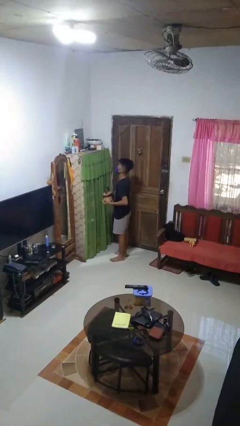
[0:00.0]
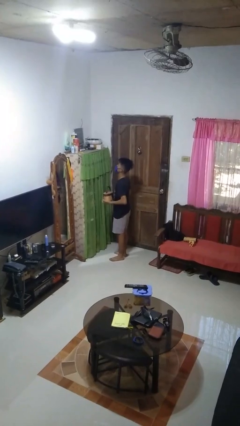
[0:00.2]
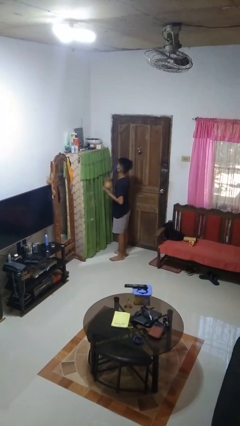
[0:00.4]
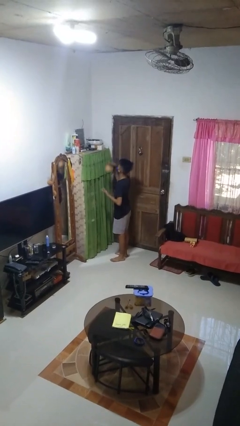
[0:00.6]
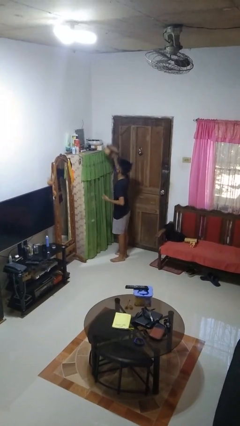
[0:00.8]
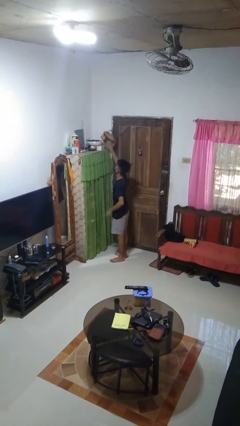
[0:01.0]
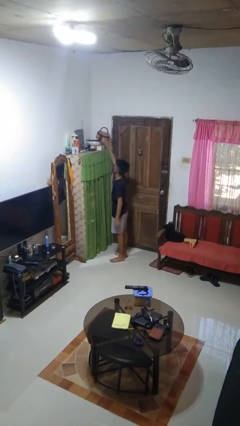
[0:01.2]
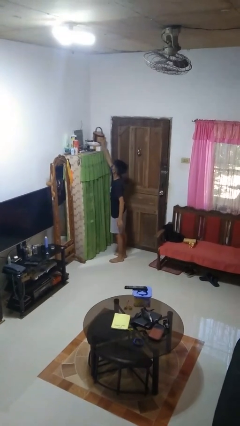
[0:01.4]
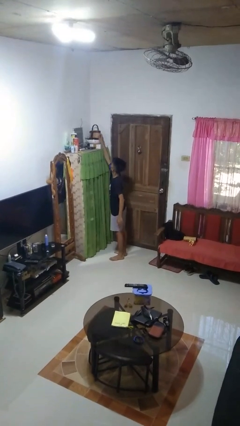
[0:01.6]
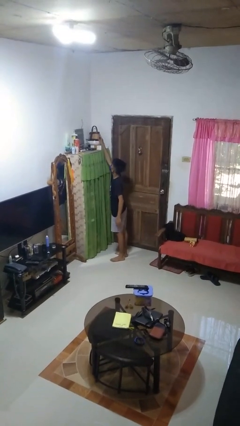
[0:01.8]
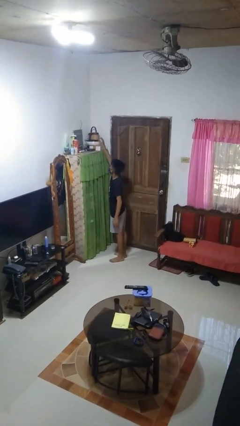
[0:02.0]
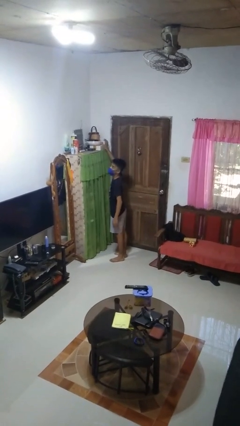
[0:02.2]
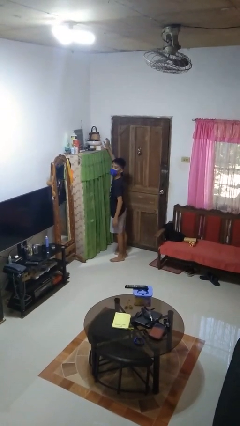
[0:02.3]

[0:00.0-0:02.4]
person puts down object on shelf

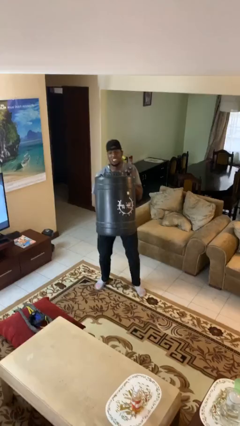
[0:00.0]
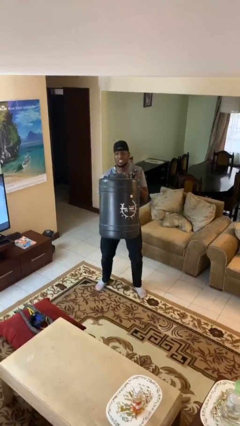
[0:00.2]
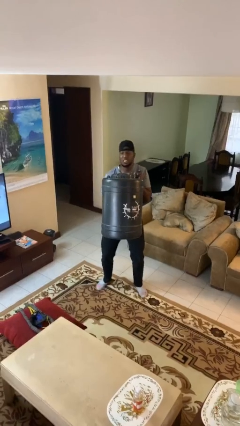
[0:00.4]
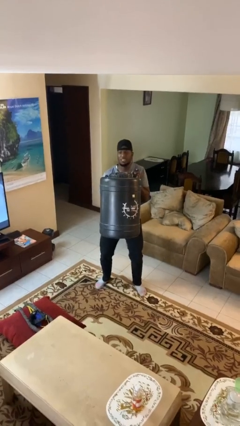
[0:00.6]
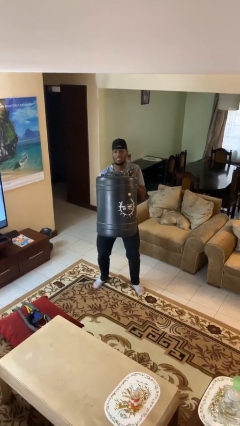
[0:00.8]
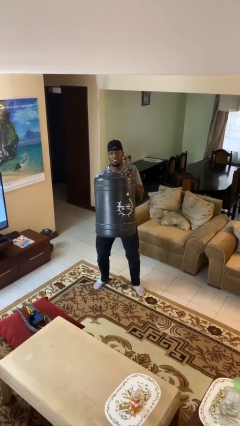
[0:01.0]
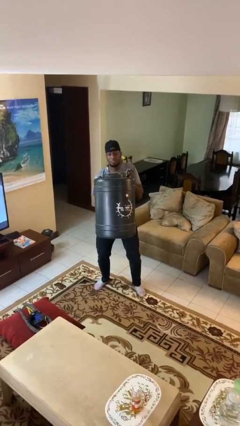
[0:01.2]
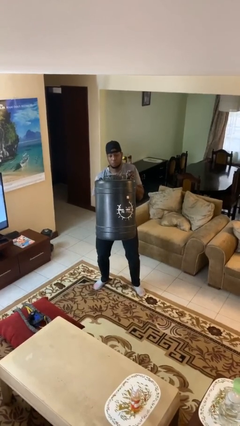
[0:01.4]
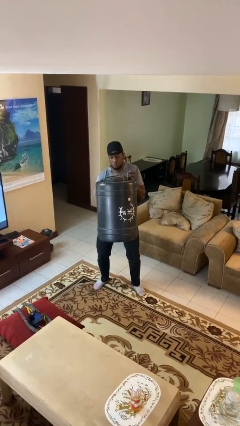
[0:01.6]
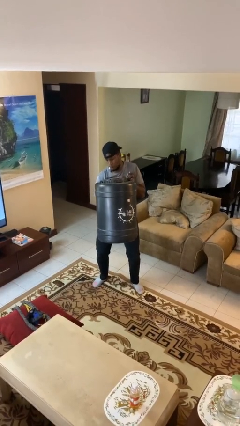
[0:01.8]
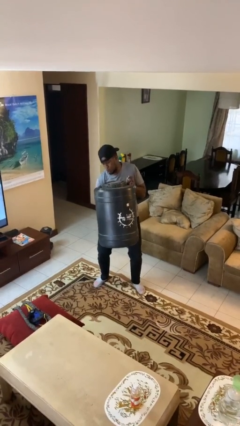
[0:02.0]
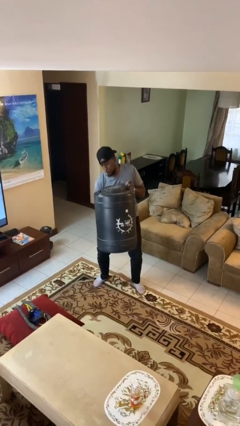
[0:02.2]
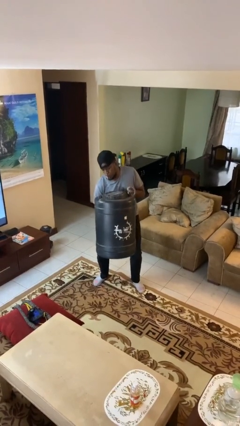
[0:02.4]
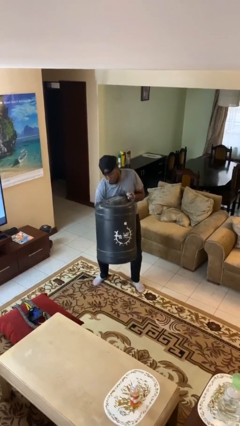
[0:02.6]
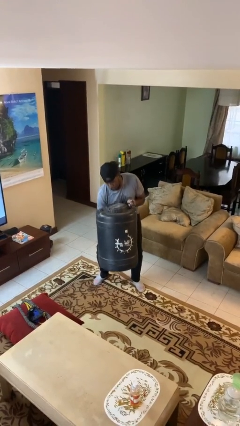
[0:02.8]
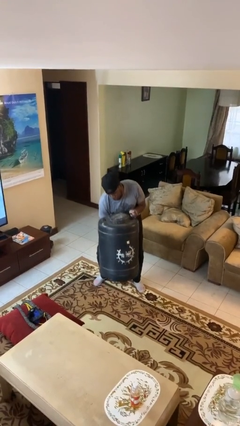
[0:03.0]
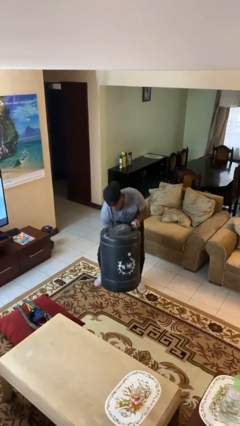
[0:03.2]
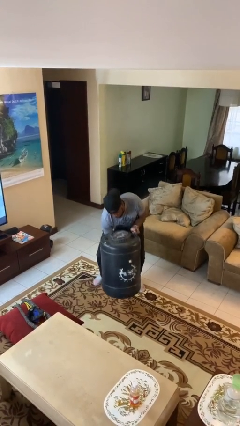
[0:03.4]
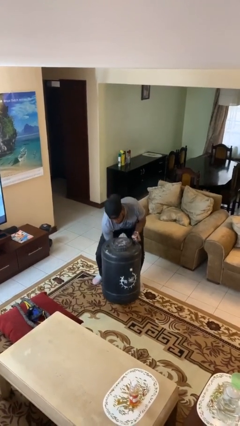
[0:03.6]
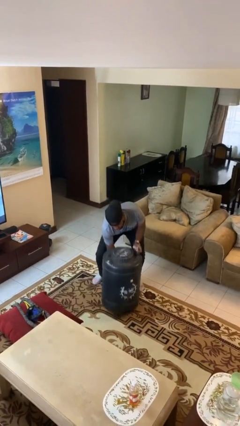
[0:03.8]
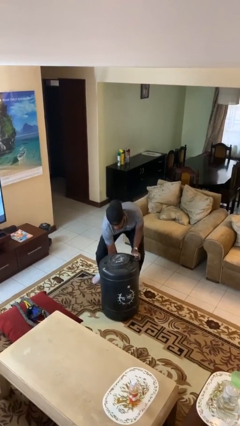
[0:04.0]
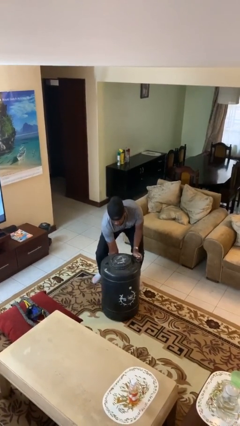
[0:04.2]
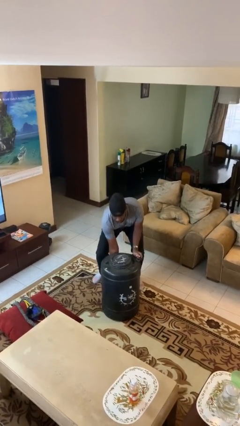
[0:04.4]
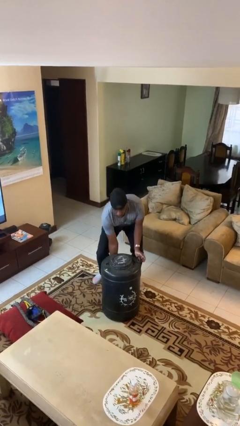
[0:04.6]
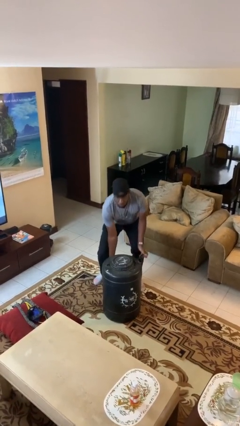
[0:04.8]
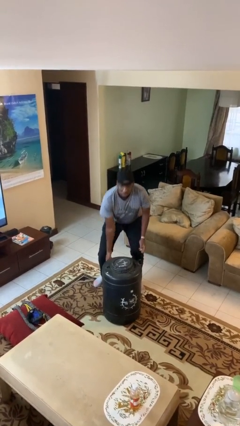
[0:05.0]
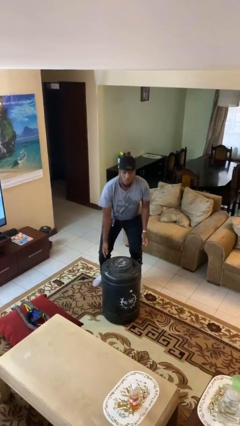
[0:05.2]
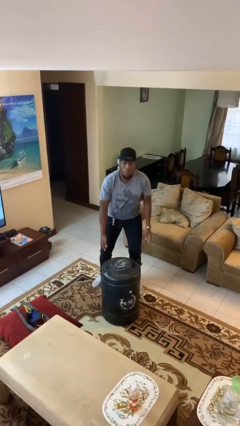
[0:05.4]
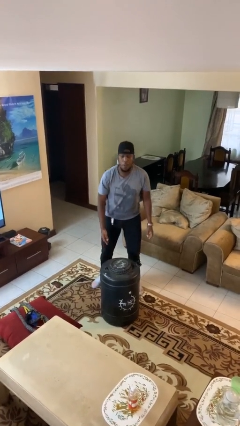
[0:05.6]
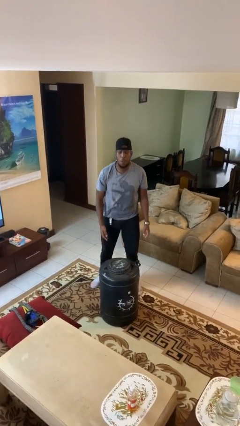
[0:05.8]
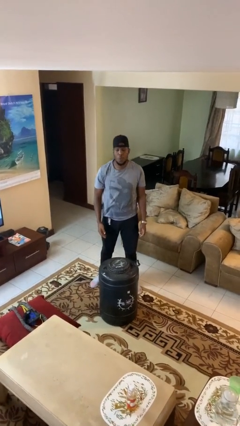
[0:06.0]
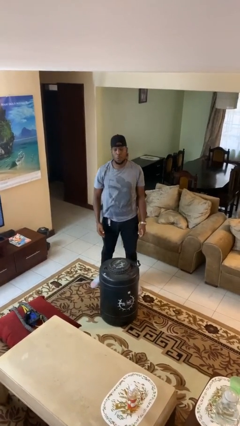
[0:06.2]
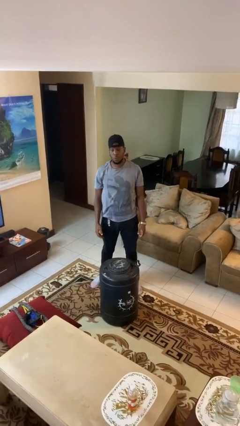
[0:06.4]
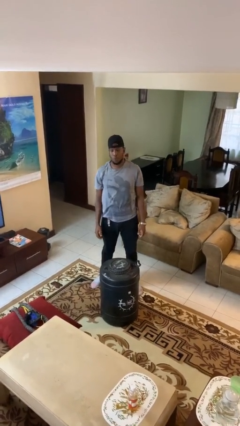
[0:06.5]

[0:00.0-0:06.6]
person puts down object on floor

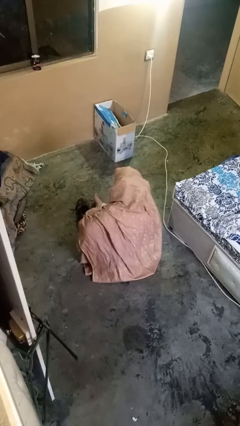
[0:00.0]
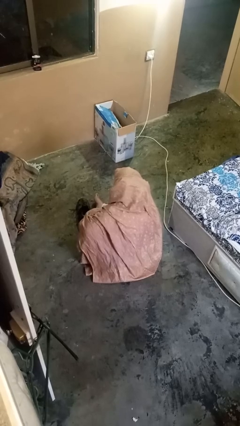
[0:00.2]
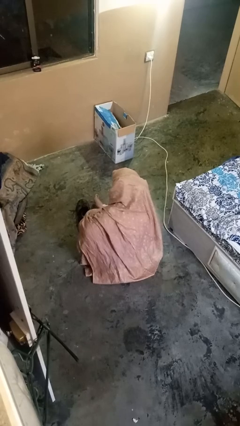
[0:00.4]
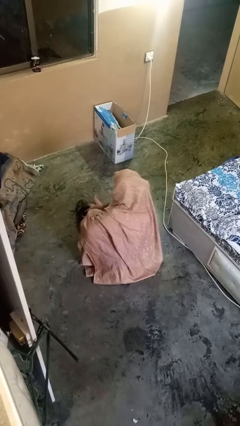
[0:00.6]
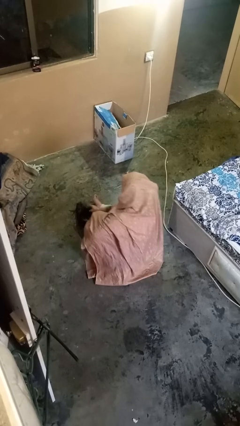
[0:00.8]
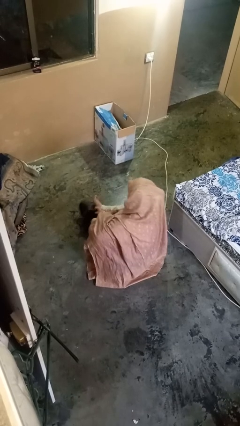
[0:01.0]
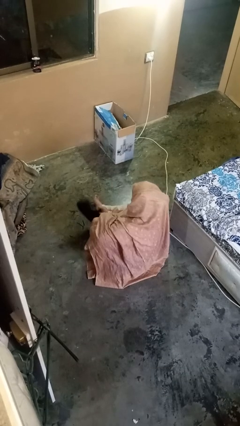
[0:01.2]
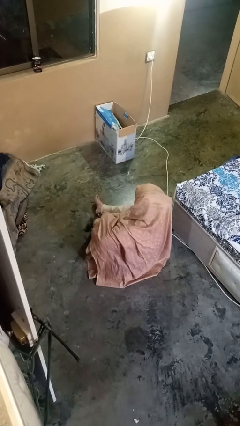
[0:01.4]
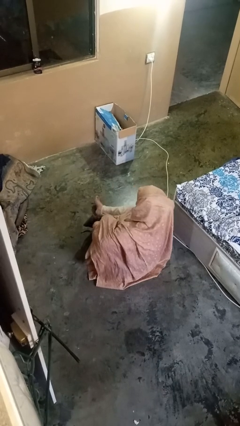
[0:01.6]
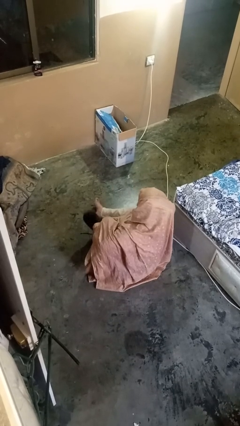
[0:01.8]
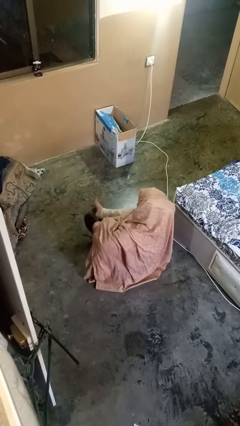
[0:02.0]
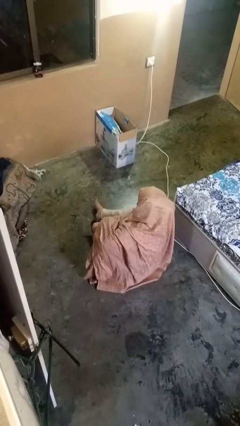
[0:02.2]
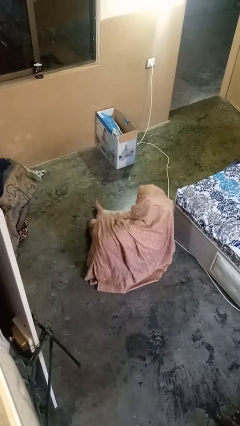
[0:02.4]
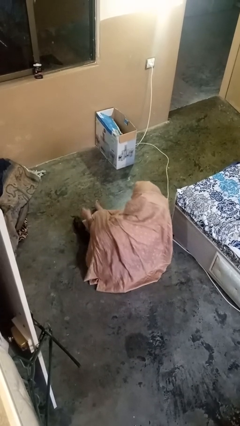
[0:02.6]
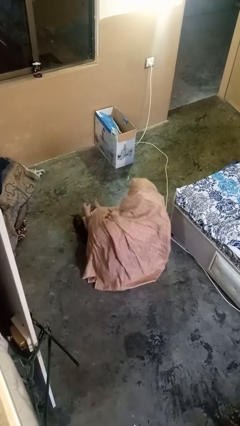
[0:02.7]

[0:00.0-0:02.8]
person puts on shoes

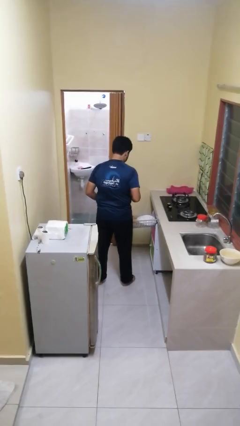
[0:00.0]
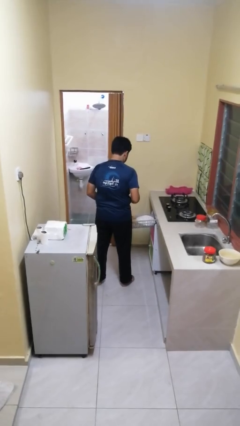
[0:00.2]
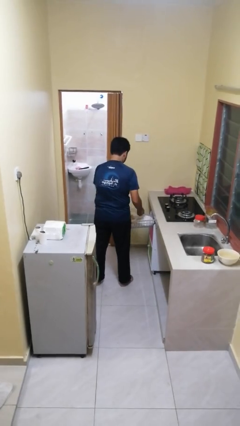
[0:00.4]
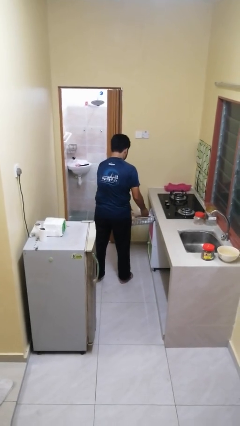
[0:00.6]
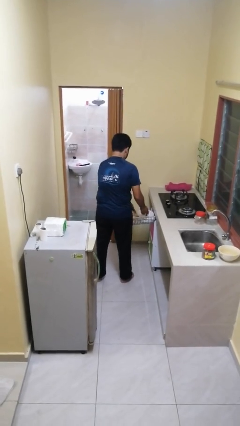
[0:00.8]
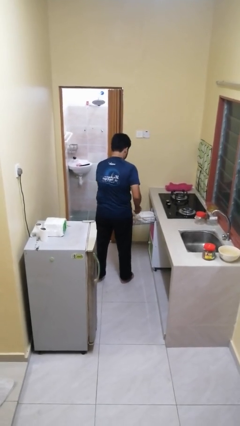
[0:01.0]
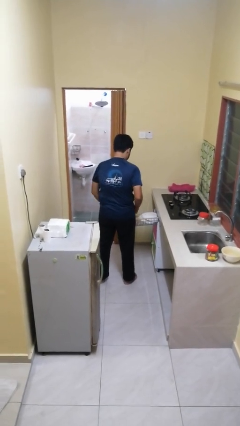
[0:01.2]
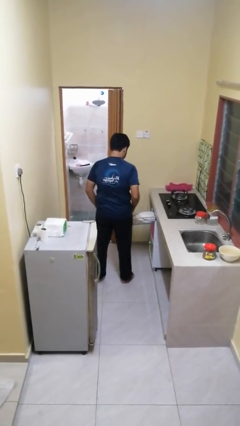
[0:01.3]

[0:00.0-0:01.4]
person puts object into kitchen drawer

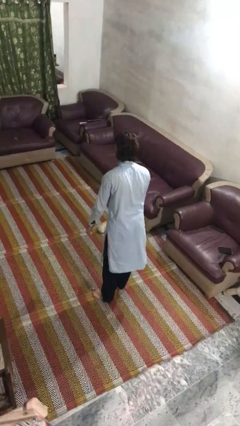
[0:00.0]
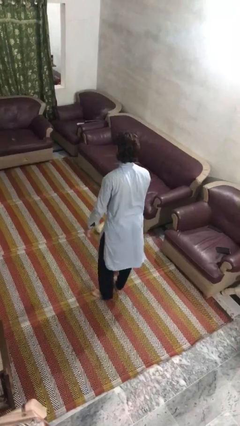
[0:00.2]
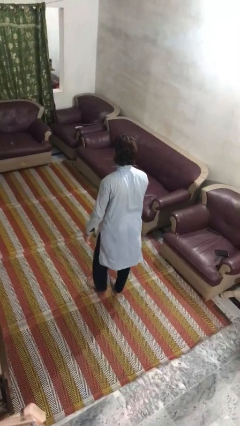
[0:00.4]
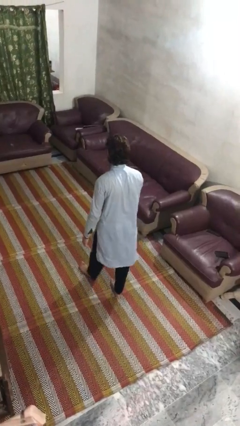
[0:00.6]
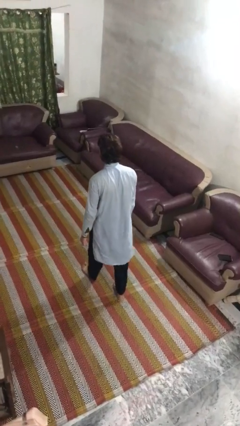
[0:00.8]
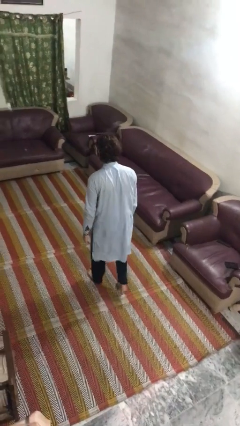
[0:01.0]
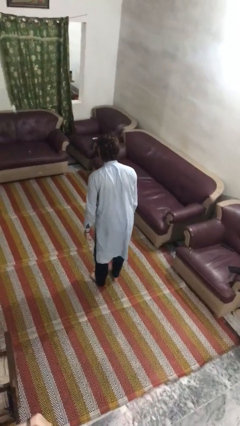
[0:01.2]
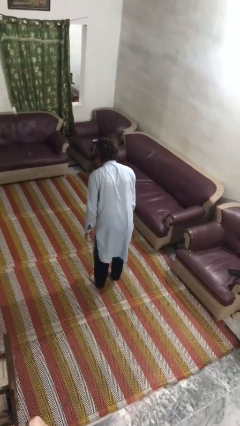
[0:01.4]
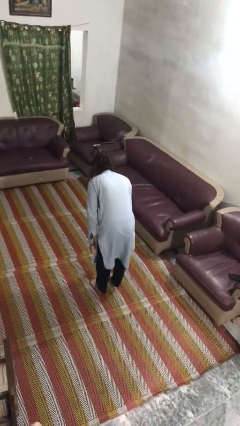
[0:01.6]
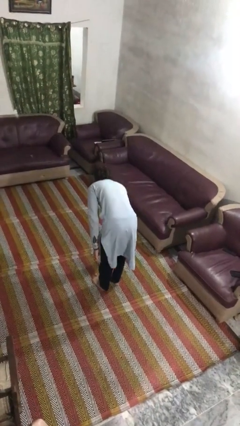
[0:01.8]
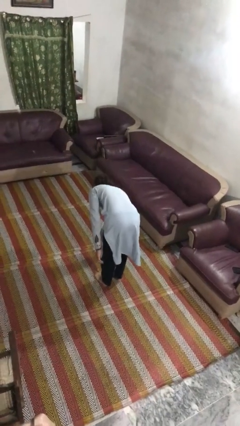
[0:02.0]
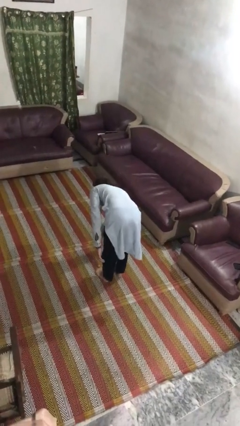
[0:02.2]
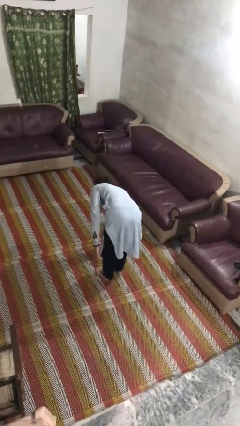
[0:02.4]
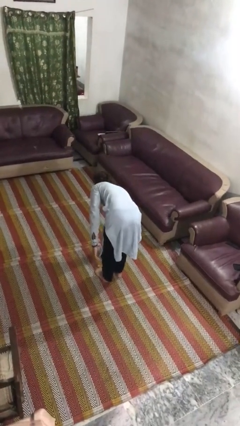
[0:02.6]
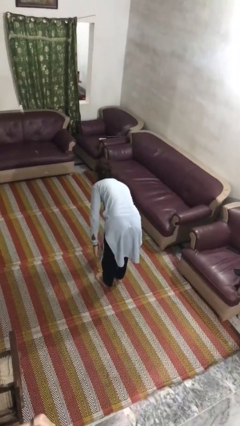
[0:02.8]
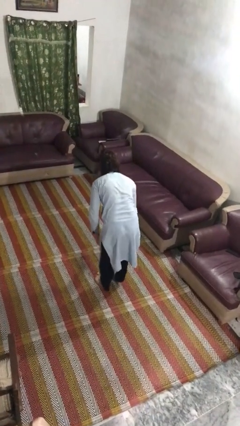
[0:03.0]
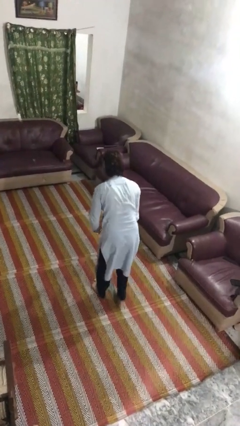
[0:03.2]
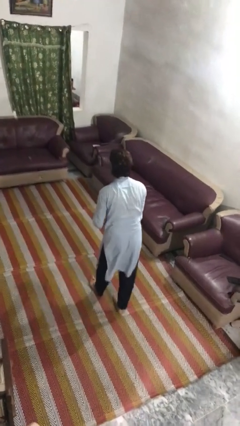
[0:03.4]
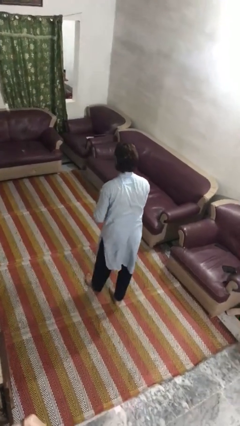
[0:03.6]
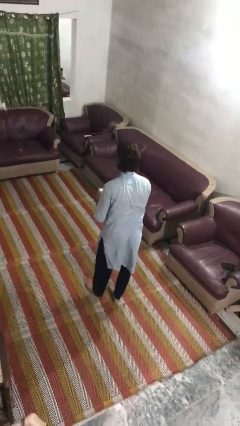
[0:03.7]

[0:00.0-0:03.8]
person picks up object from floor

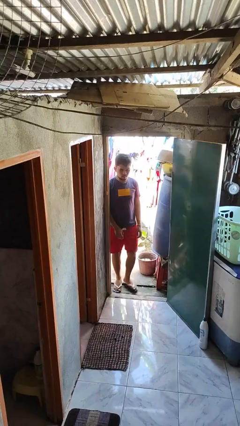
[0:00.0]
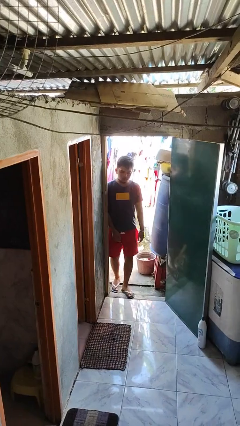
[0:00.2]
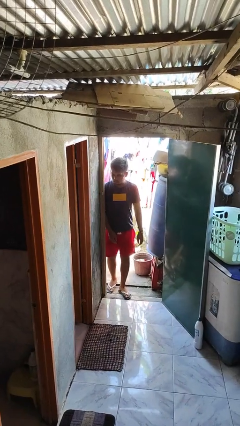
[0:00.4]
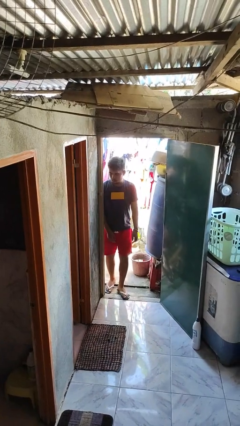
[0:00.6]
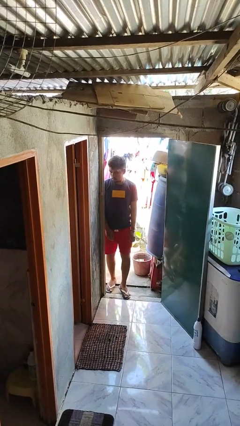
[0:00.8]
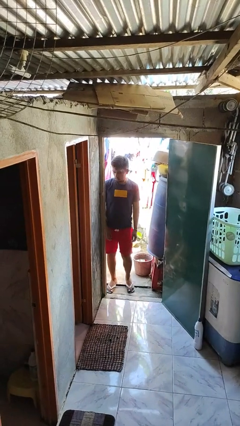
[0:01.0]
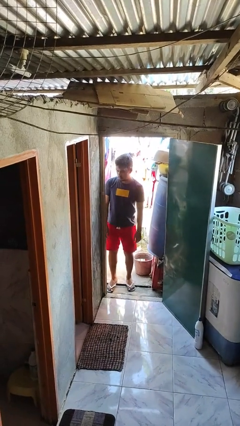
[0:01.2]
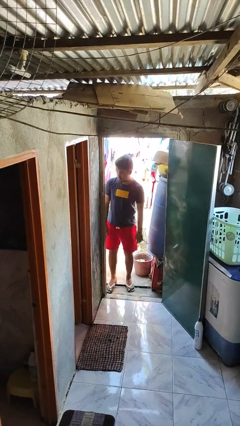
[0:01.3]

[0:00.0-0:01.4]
person bumps into wall
